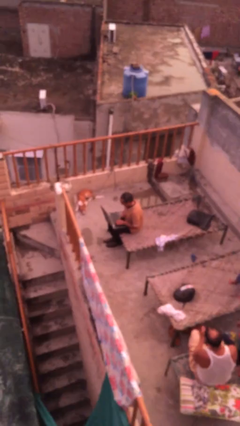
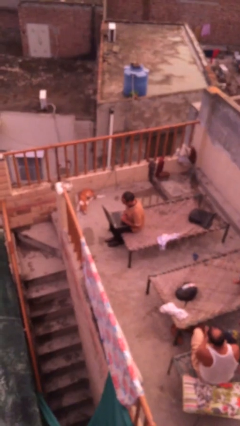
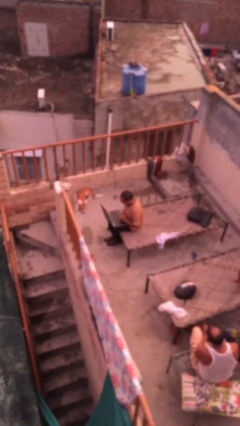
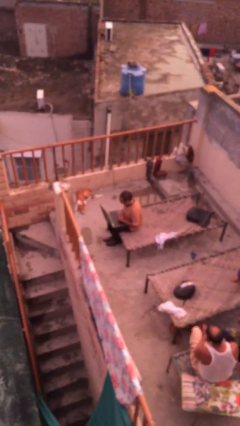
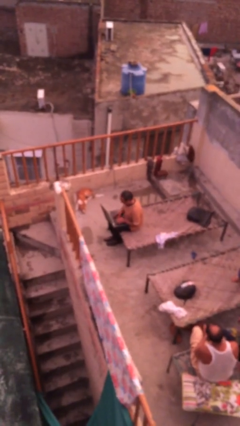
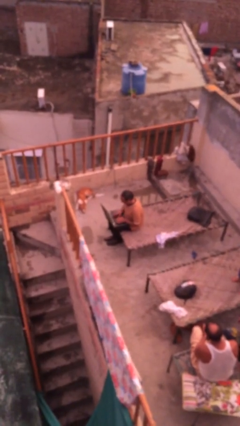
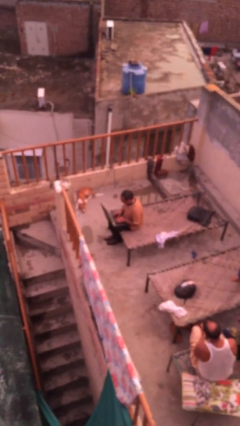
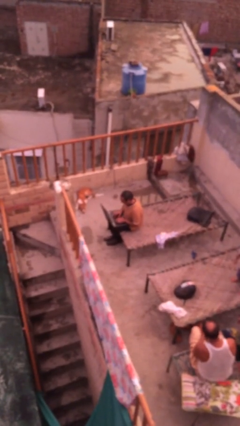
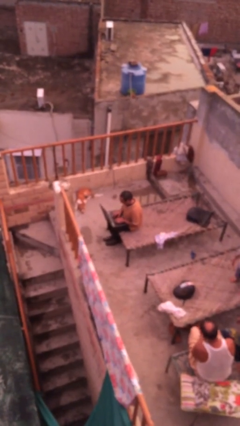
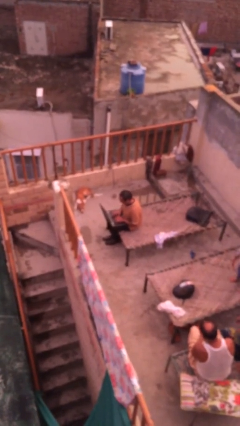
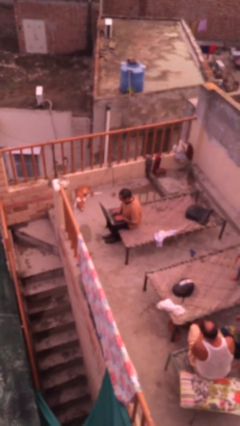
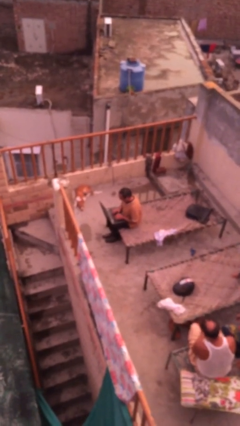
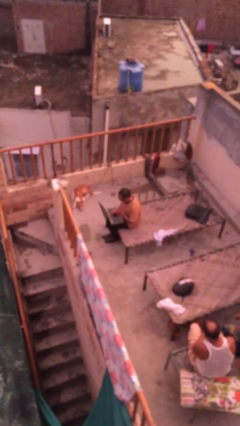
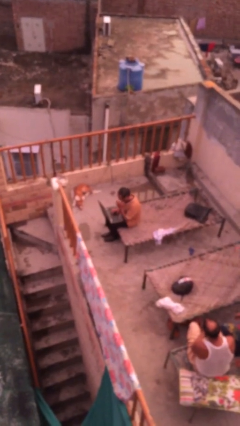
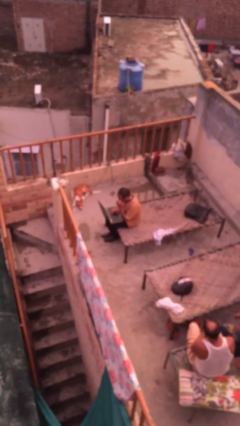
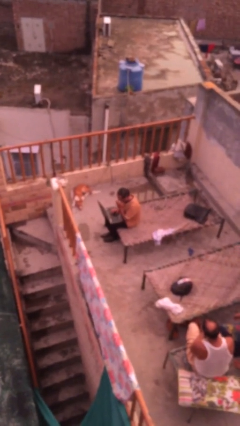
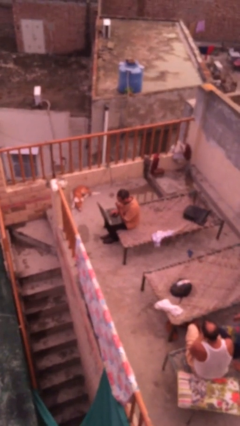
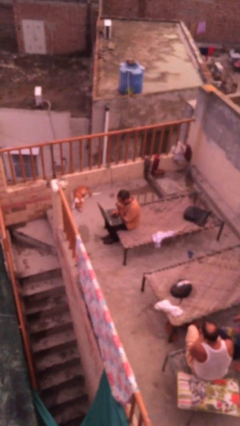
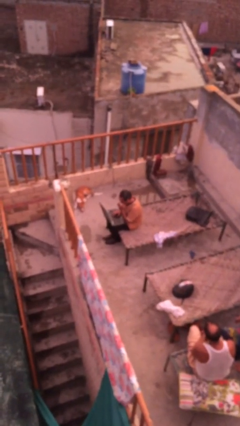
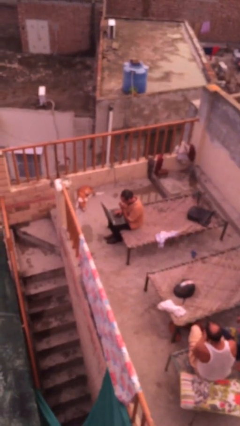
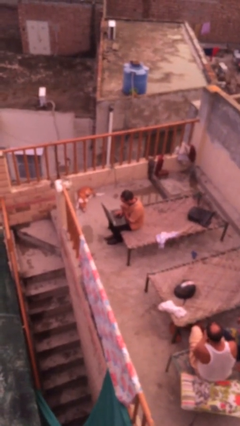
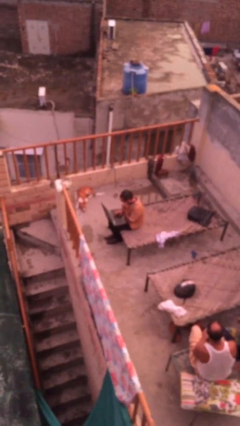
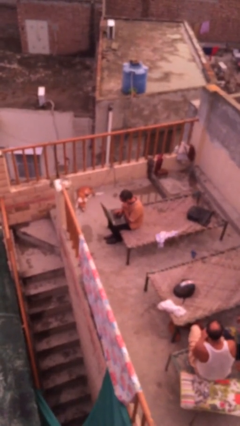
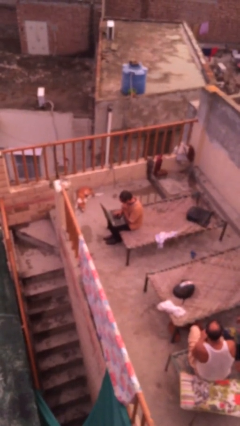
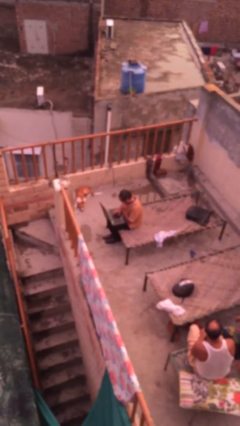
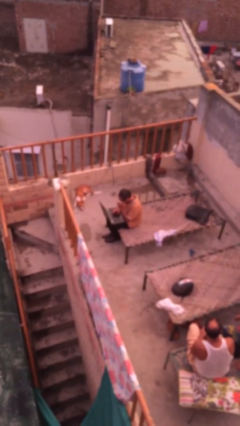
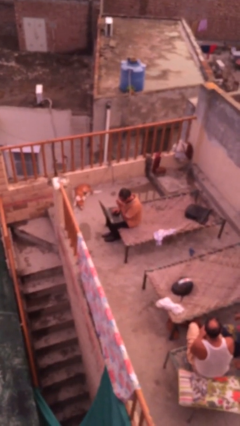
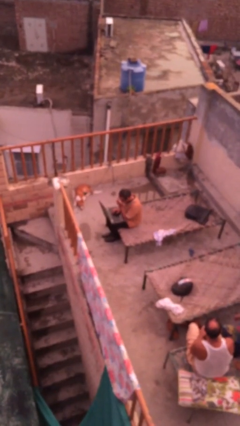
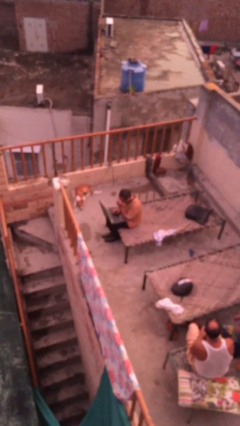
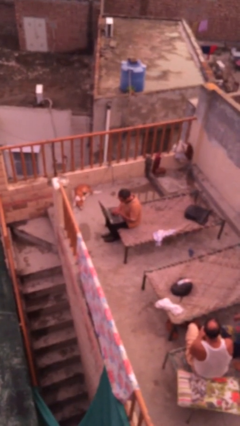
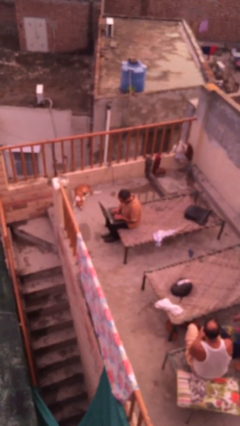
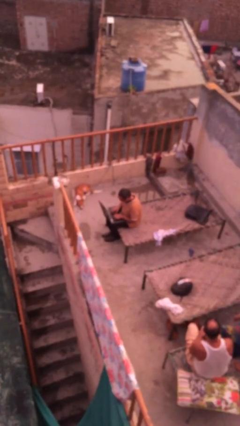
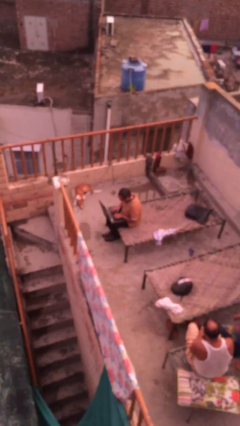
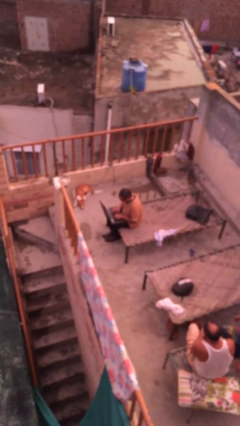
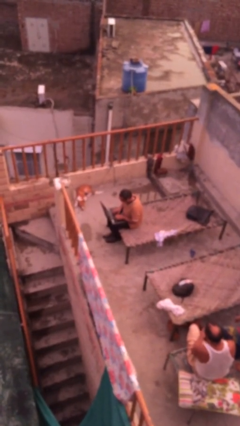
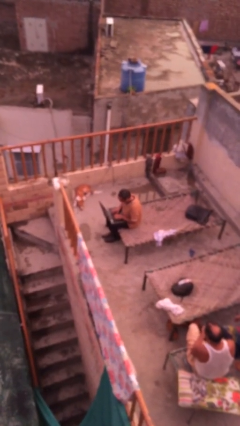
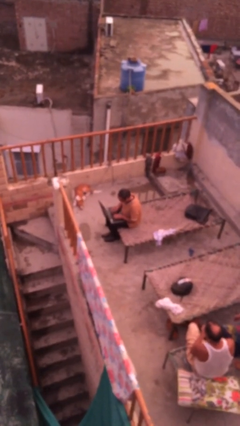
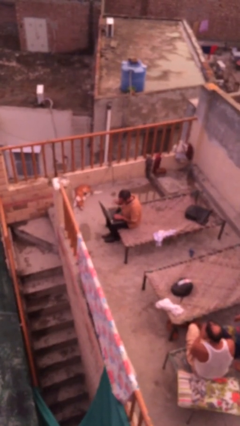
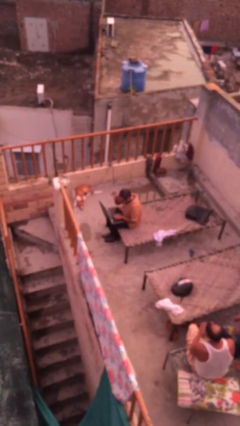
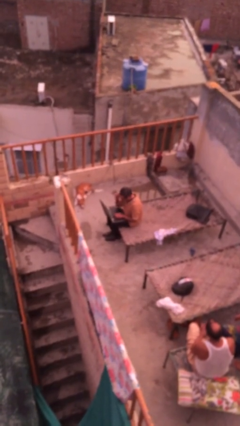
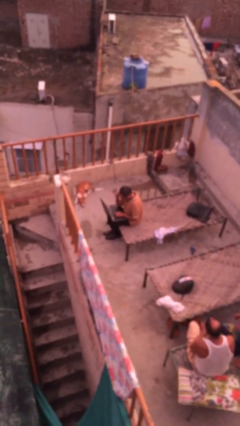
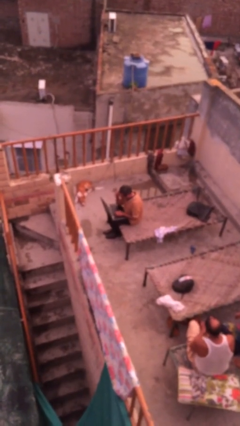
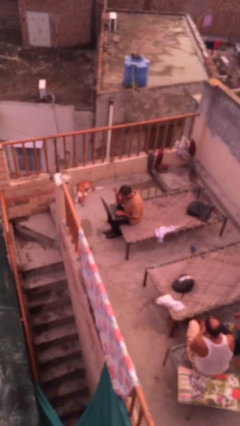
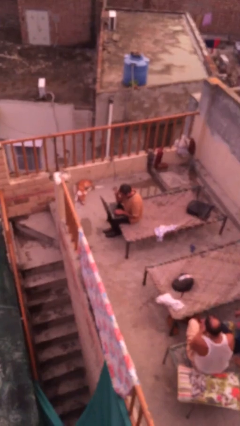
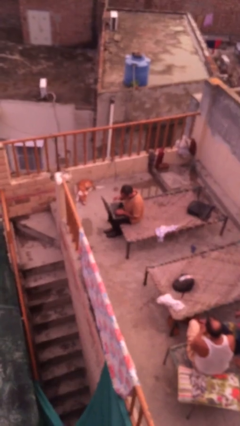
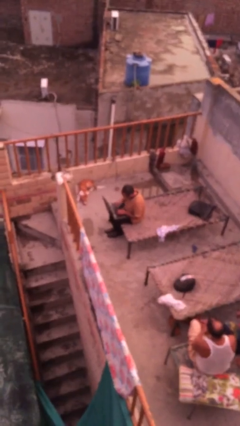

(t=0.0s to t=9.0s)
person interacts with laptop

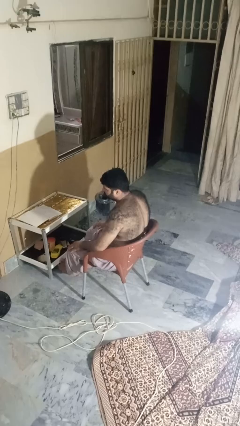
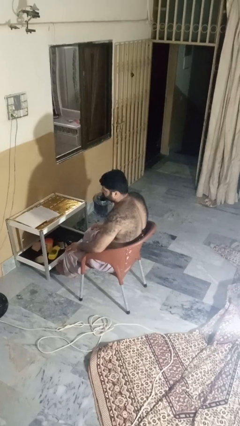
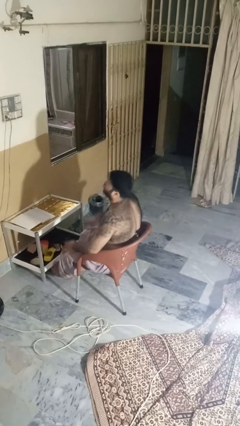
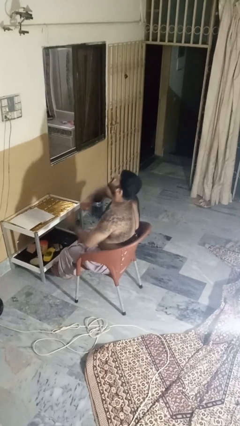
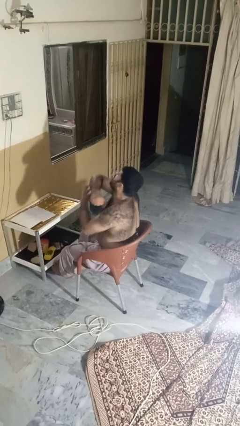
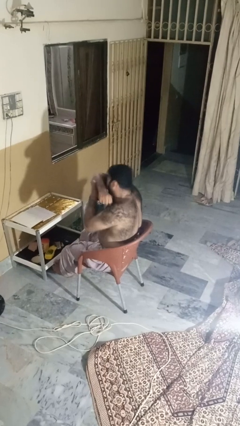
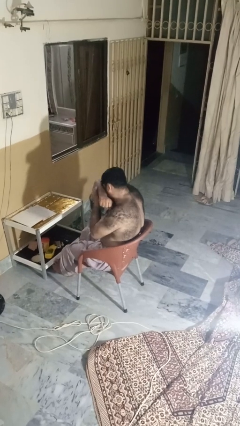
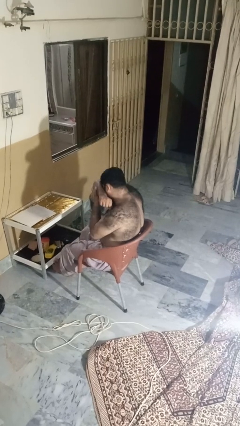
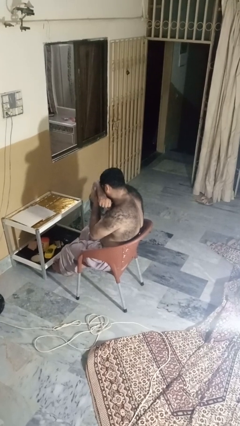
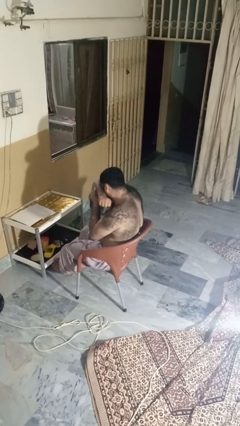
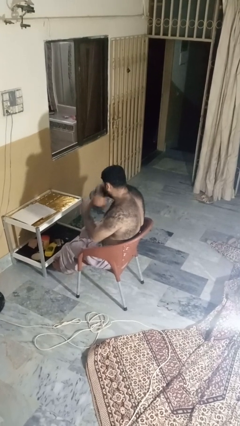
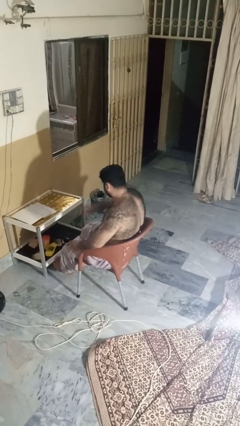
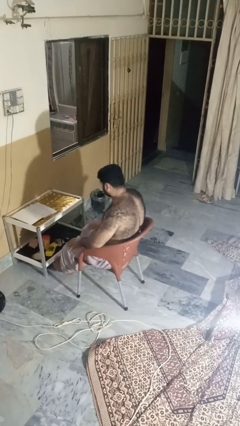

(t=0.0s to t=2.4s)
person sneezes into arm

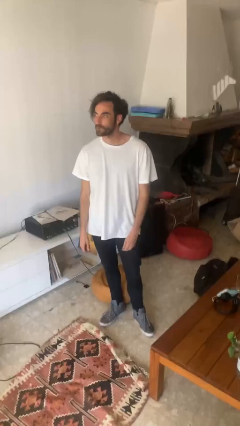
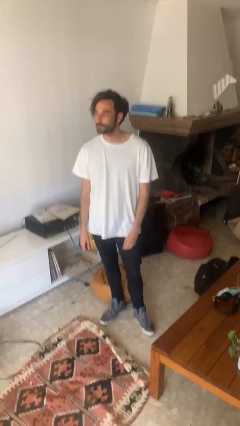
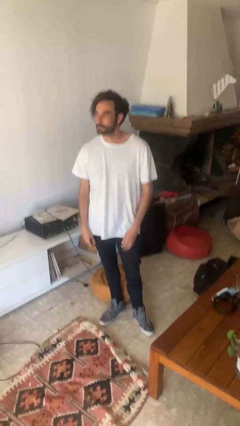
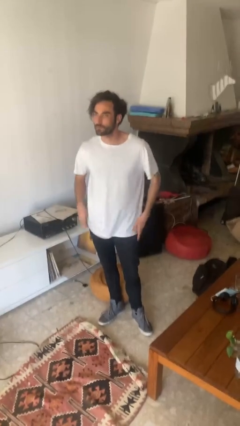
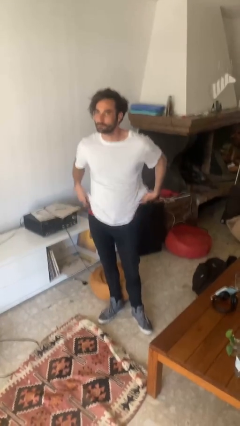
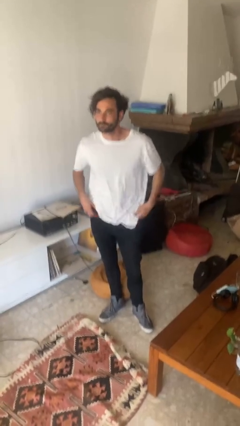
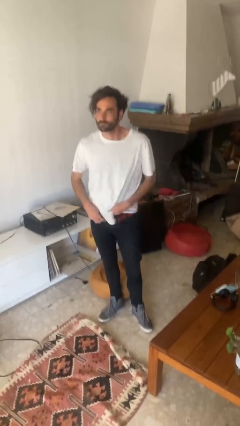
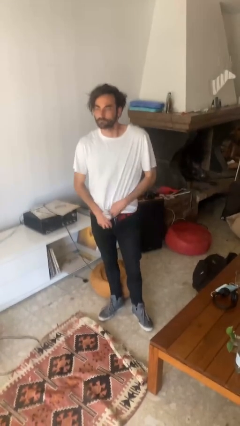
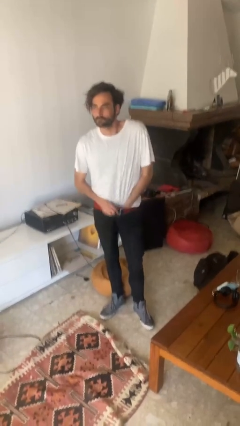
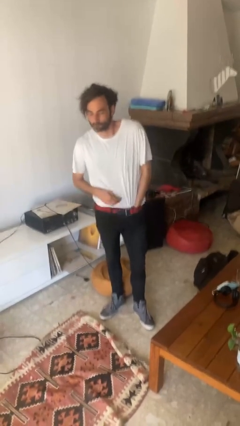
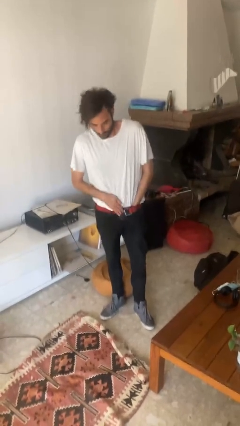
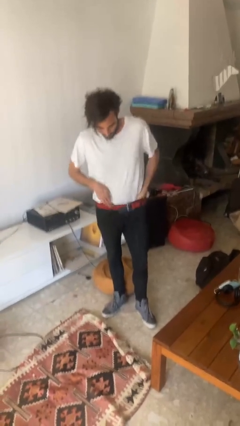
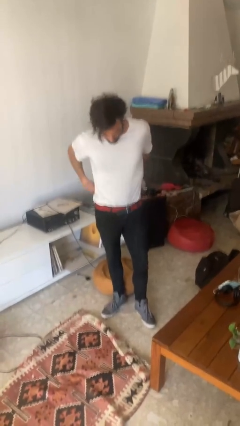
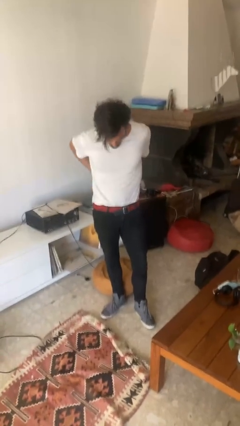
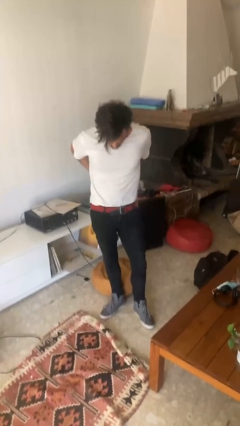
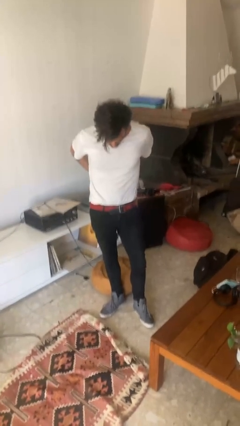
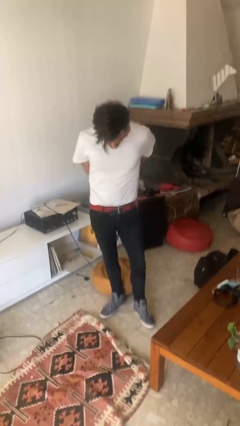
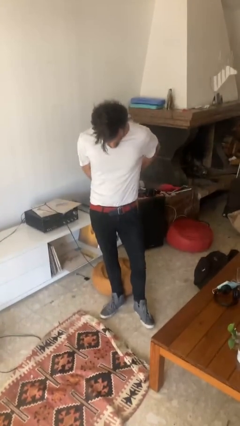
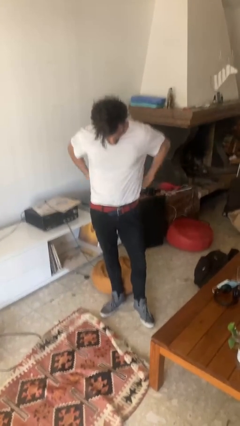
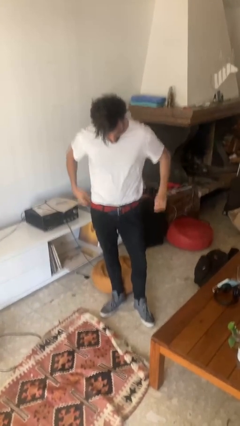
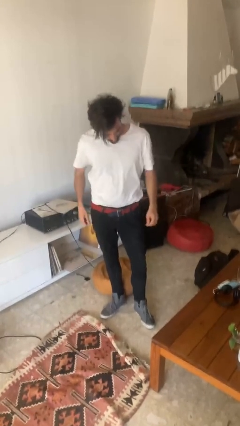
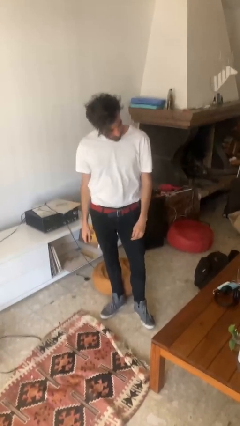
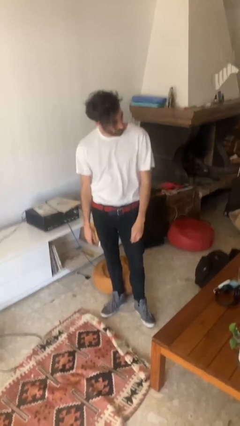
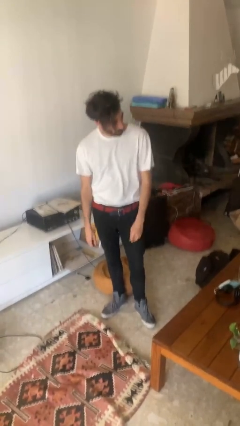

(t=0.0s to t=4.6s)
person tucks in shirt

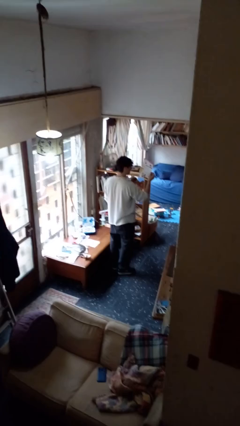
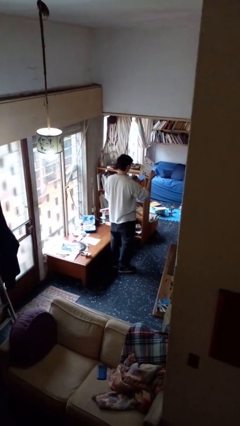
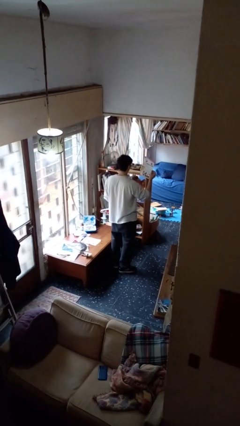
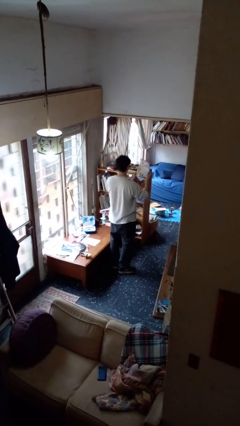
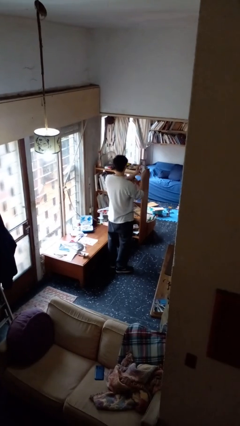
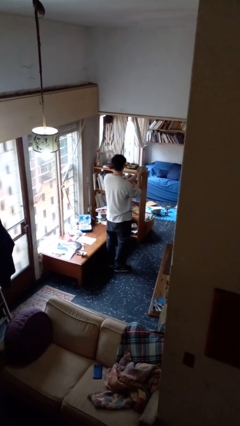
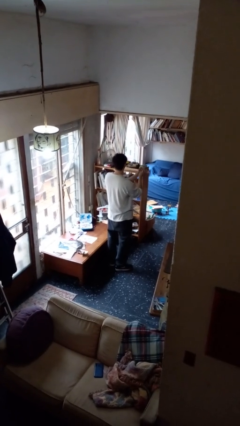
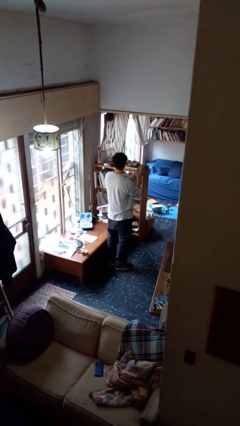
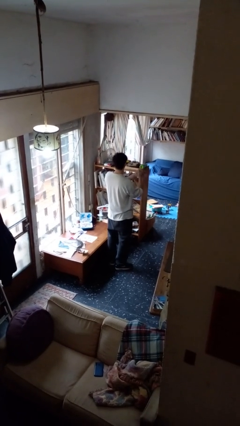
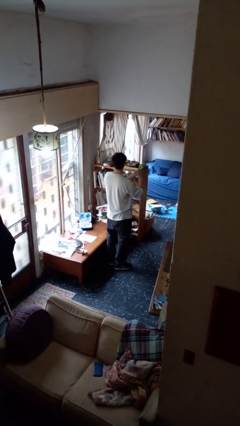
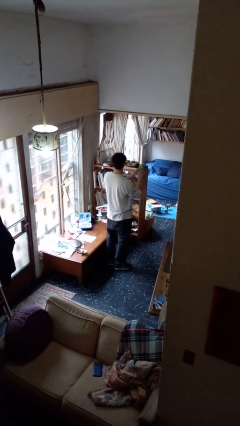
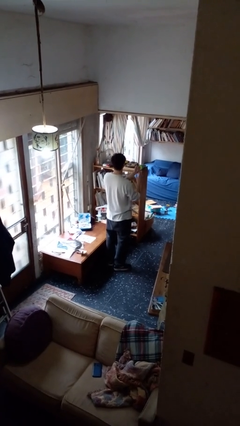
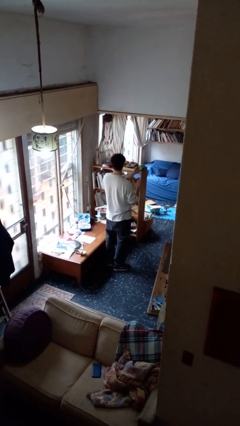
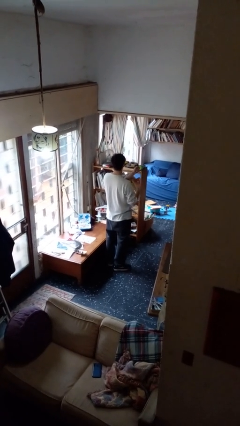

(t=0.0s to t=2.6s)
person crumples paper
